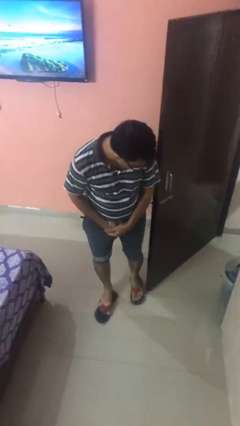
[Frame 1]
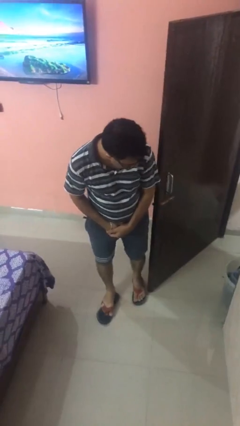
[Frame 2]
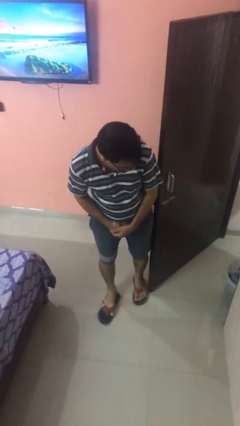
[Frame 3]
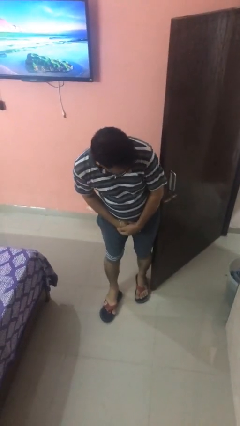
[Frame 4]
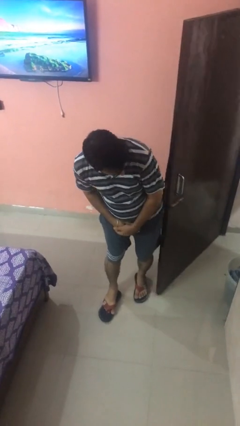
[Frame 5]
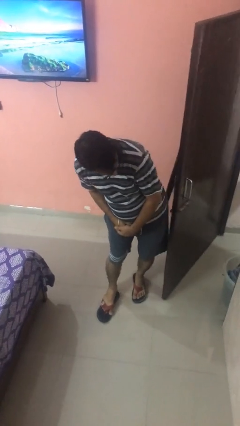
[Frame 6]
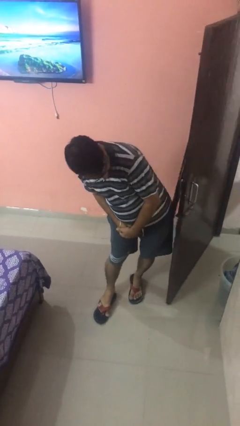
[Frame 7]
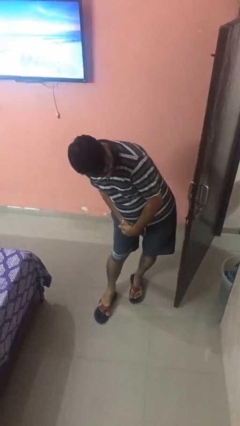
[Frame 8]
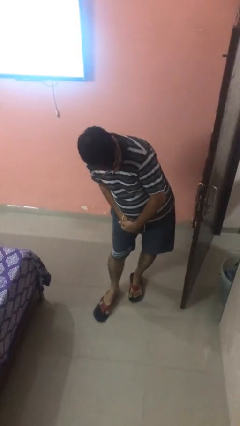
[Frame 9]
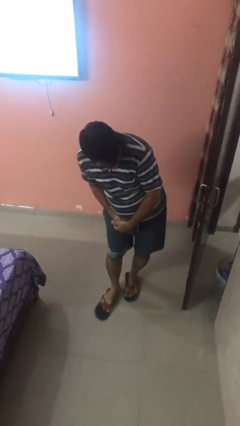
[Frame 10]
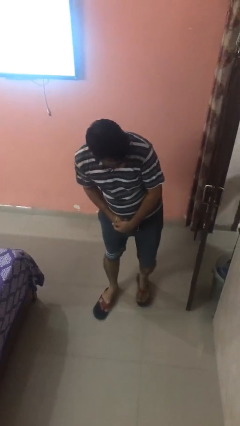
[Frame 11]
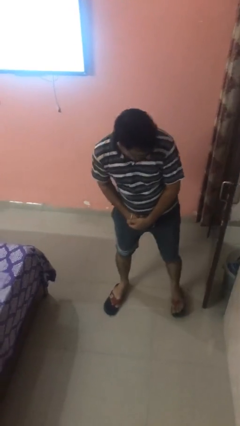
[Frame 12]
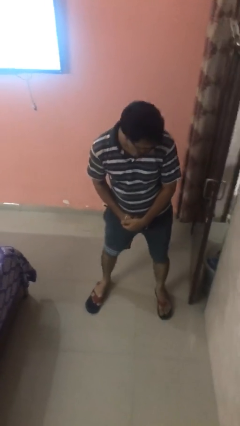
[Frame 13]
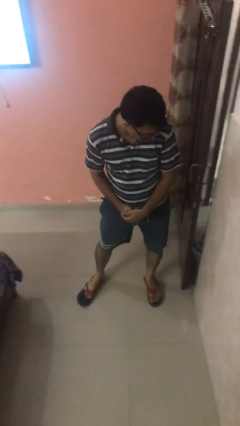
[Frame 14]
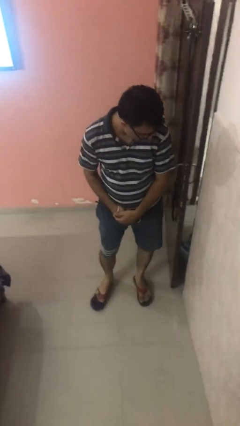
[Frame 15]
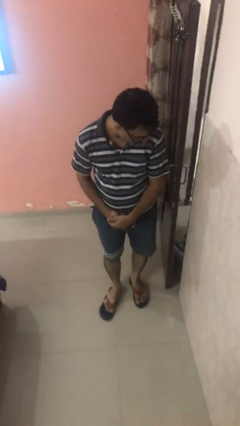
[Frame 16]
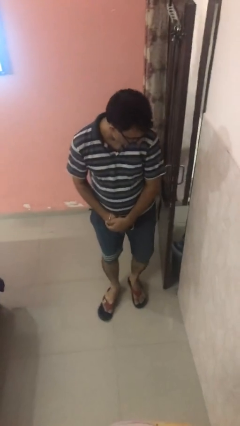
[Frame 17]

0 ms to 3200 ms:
person closes door with hip

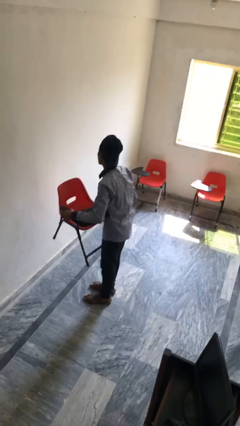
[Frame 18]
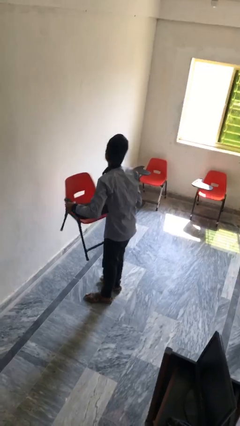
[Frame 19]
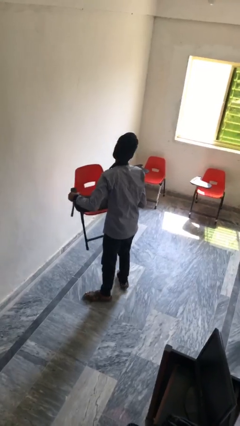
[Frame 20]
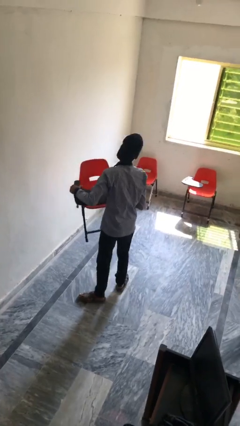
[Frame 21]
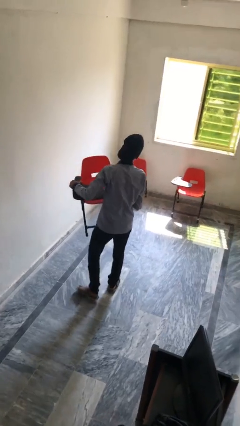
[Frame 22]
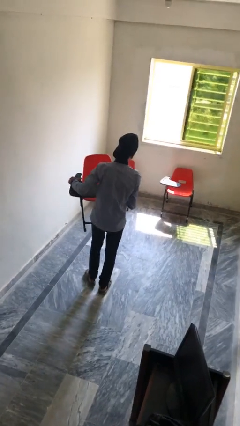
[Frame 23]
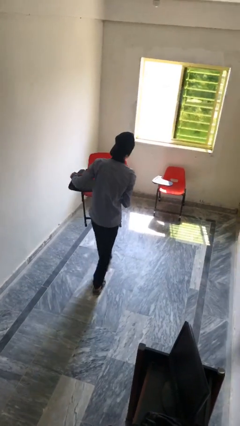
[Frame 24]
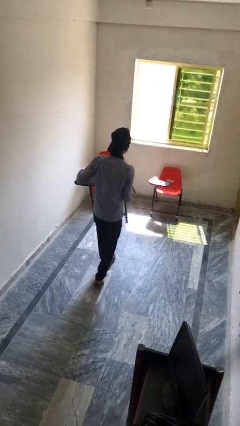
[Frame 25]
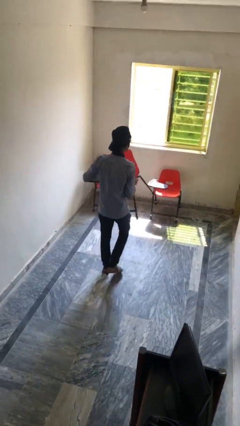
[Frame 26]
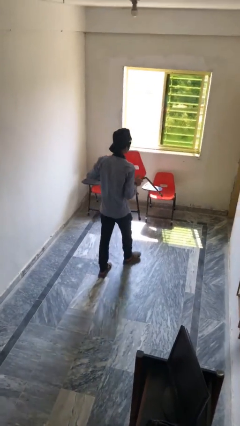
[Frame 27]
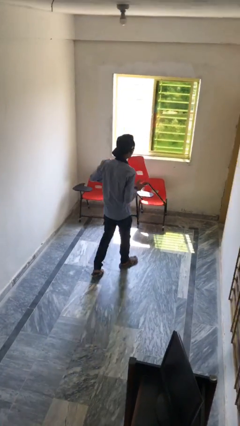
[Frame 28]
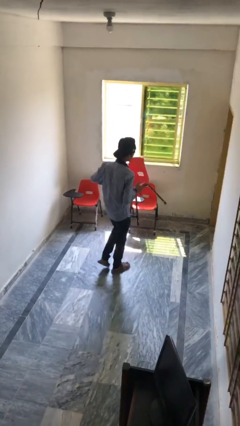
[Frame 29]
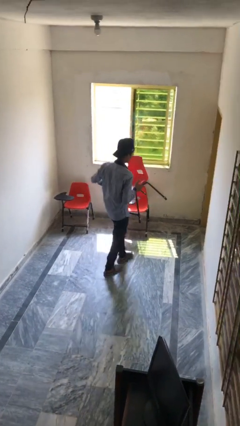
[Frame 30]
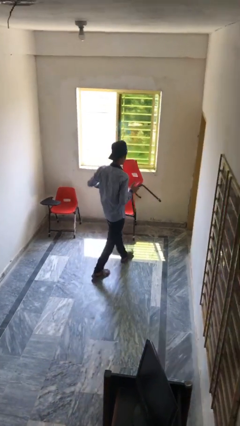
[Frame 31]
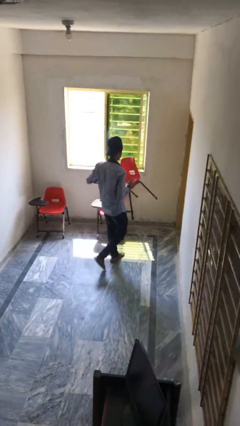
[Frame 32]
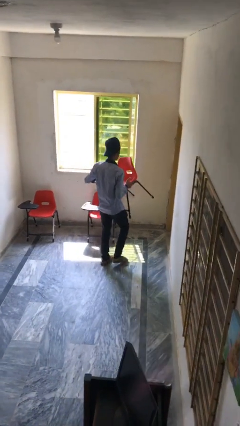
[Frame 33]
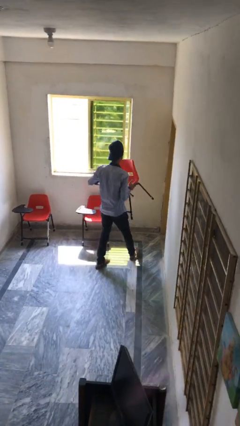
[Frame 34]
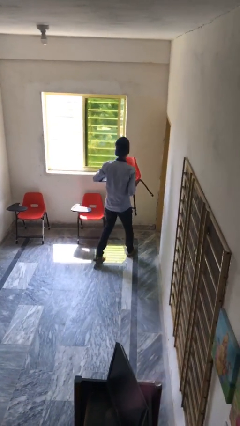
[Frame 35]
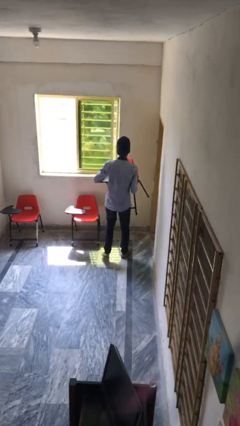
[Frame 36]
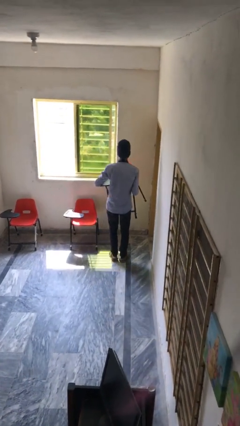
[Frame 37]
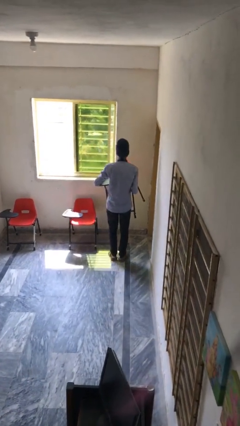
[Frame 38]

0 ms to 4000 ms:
person carries heavy object

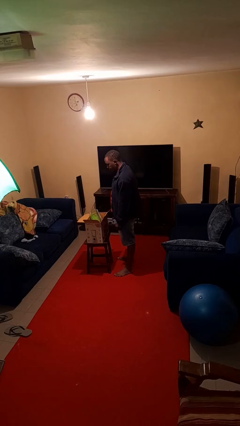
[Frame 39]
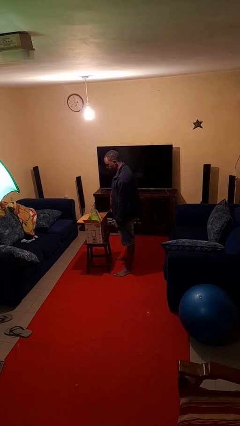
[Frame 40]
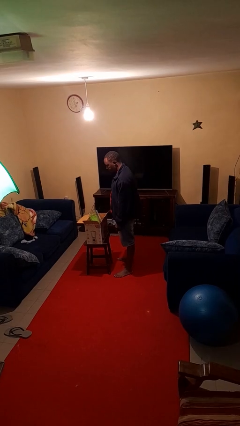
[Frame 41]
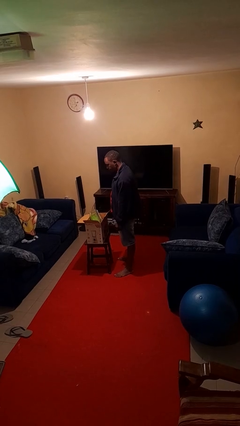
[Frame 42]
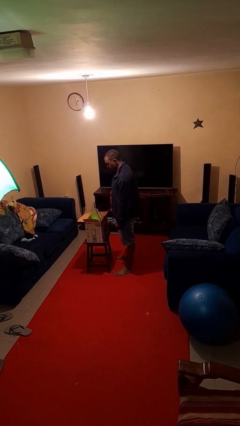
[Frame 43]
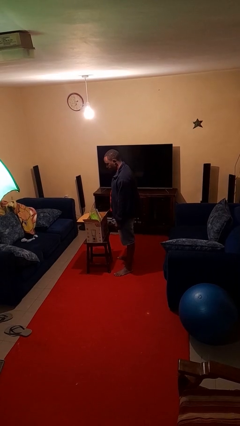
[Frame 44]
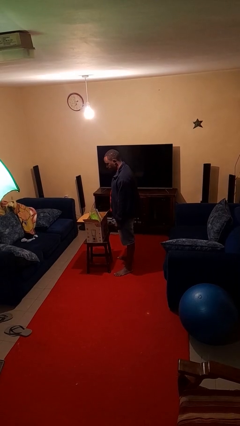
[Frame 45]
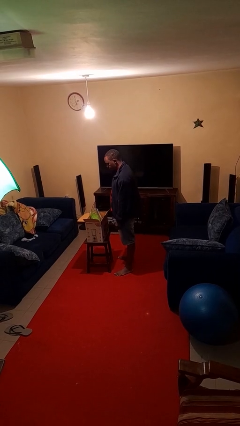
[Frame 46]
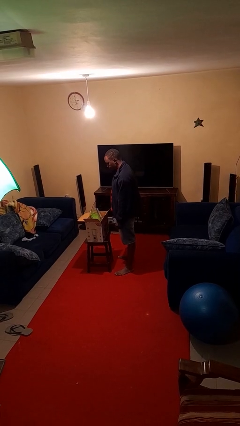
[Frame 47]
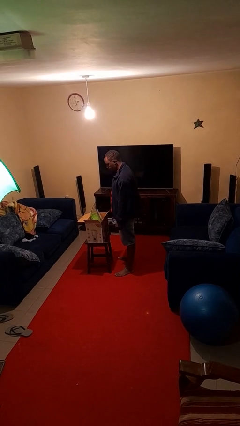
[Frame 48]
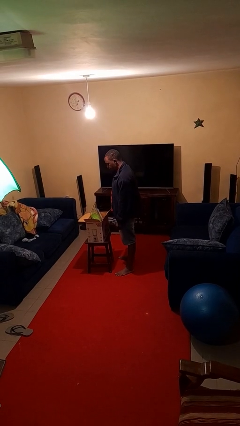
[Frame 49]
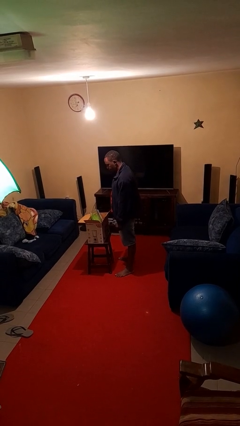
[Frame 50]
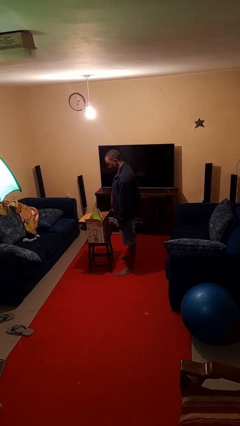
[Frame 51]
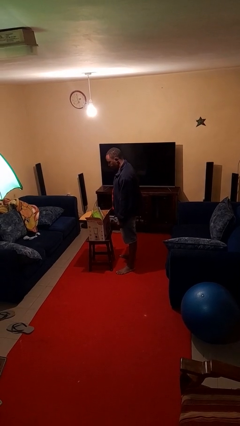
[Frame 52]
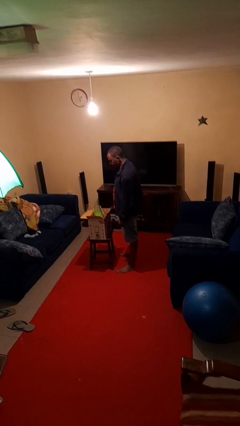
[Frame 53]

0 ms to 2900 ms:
person takes object from box

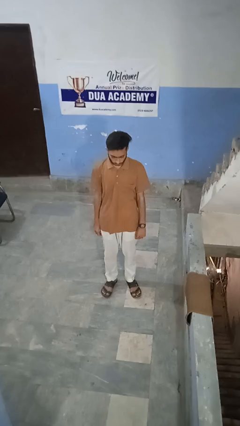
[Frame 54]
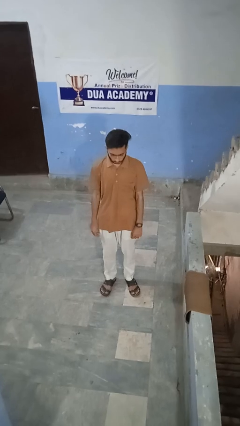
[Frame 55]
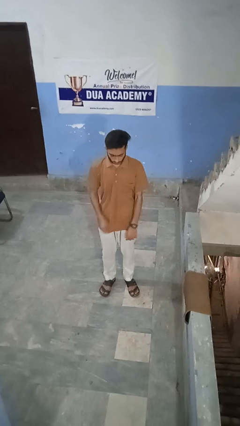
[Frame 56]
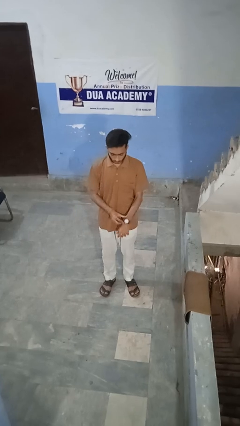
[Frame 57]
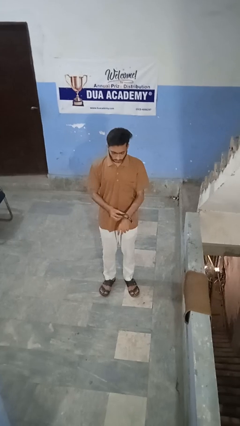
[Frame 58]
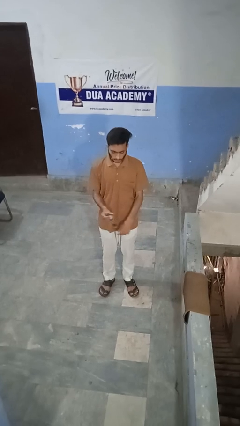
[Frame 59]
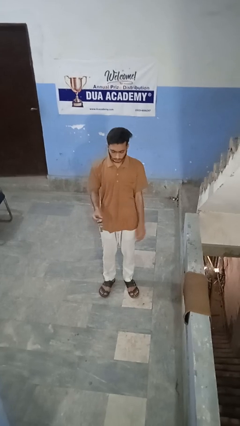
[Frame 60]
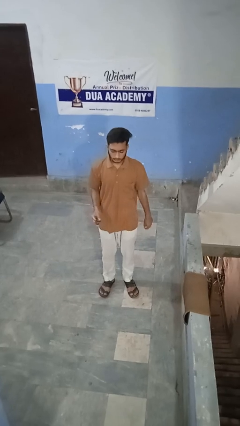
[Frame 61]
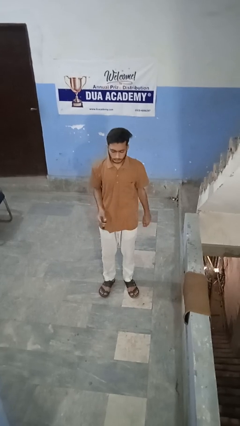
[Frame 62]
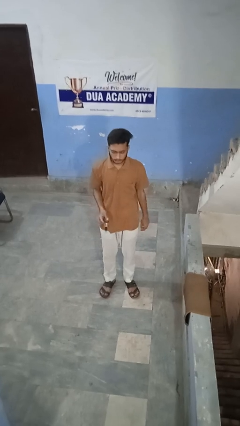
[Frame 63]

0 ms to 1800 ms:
person takes off wristwatch

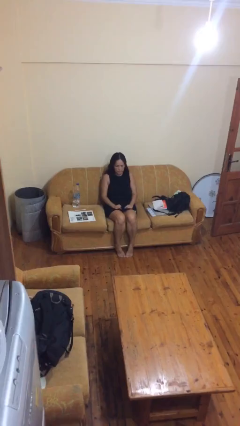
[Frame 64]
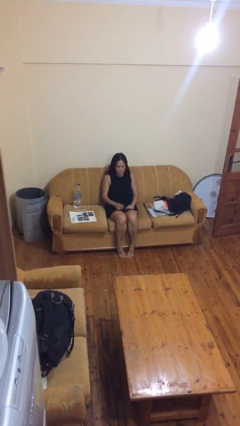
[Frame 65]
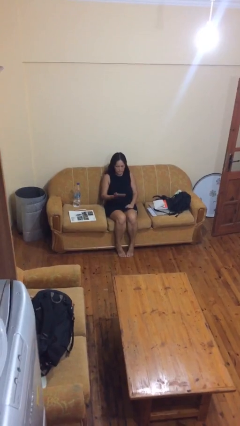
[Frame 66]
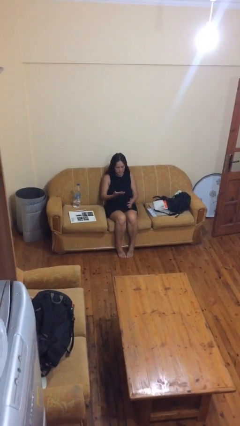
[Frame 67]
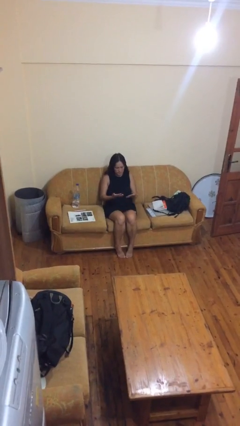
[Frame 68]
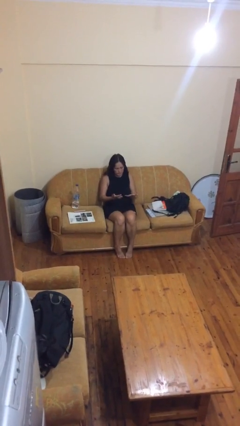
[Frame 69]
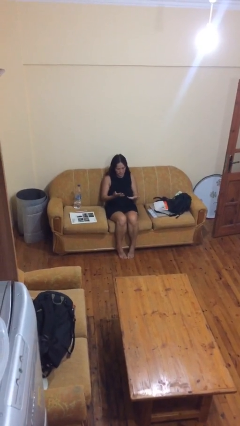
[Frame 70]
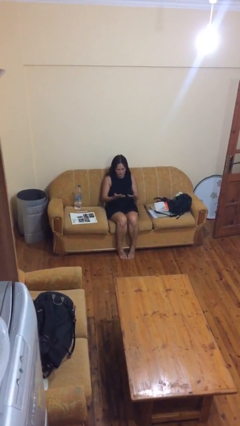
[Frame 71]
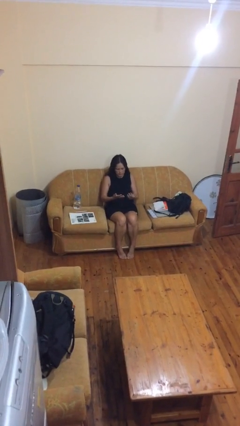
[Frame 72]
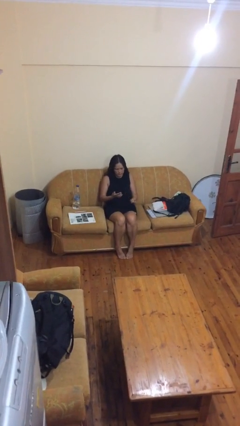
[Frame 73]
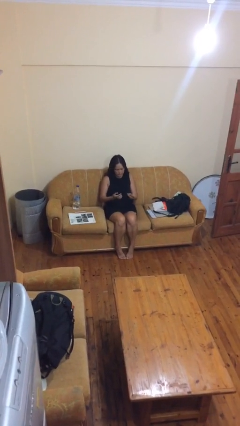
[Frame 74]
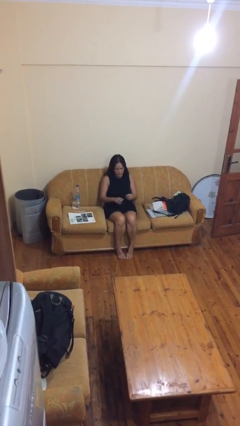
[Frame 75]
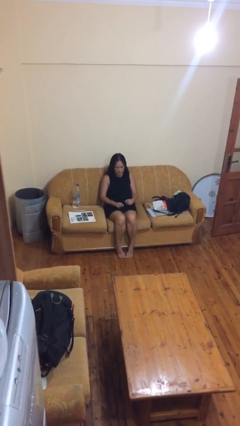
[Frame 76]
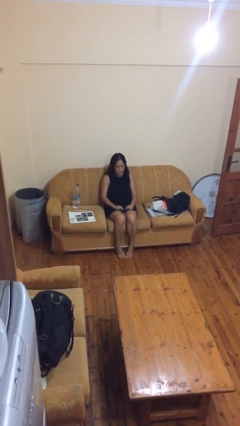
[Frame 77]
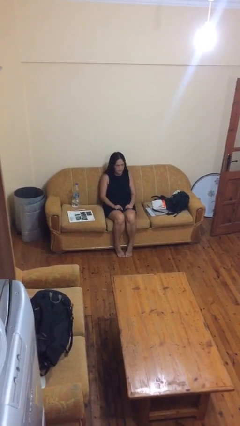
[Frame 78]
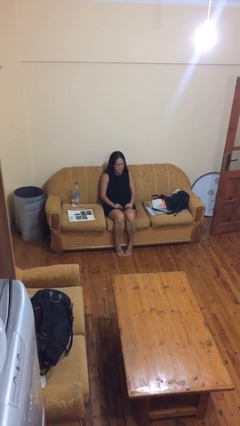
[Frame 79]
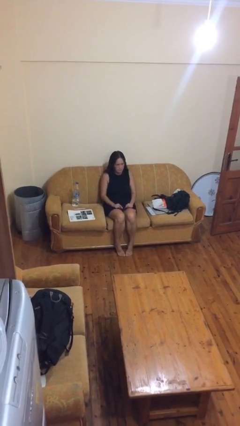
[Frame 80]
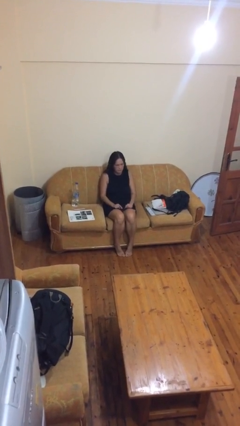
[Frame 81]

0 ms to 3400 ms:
person looks at hands in lap

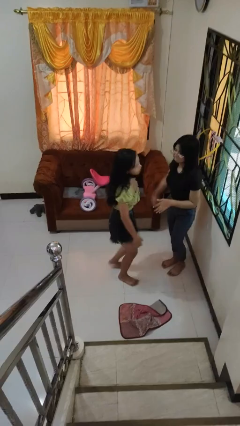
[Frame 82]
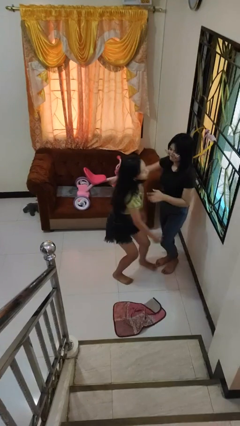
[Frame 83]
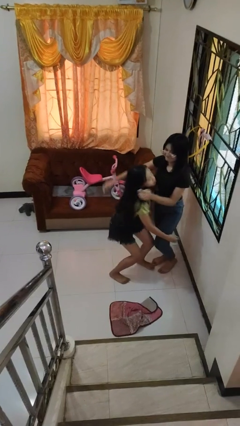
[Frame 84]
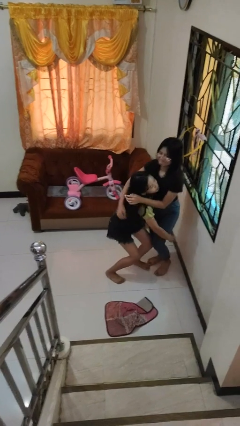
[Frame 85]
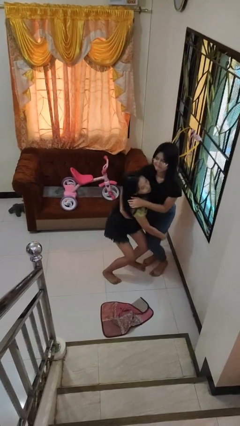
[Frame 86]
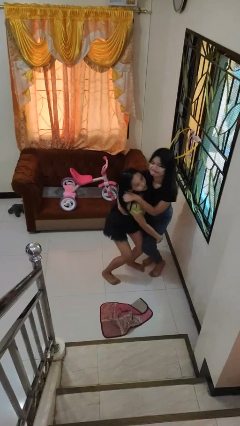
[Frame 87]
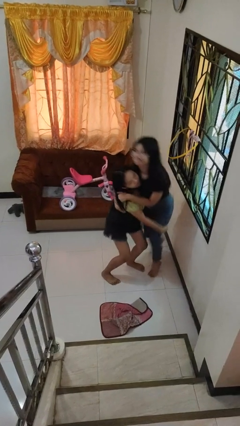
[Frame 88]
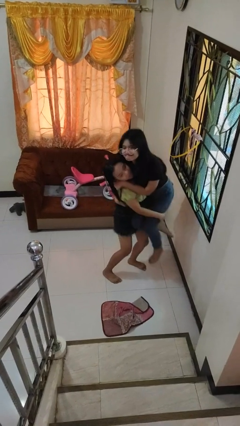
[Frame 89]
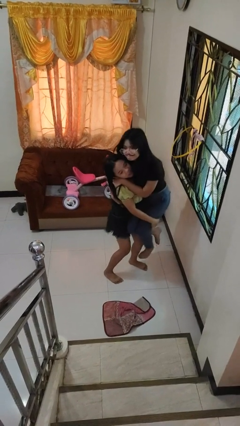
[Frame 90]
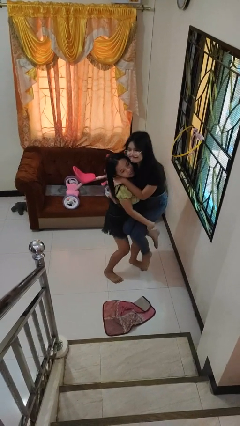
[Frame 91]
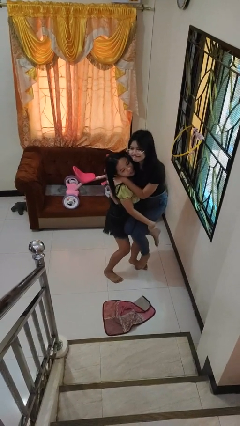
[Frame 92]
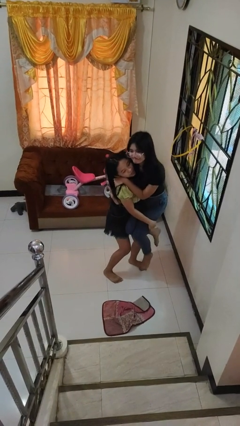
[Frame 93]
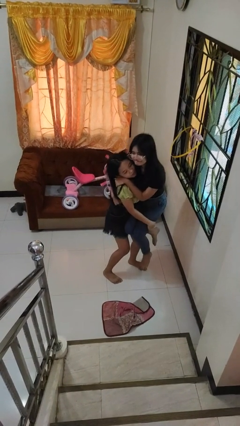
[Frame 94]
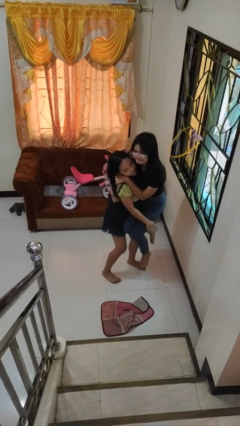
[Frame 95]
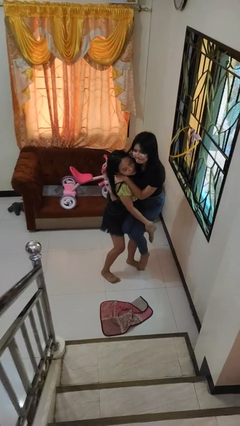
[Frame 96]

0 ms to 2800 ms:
person picks up person
